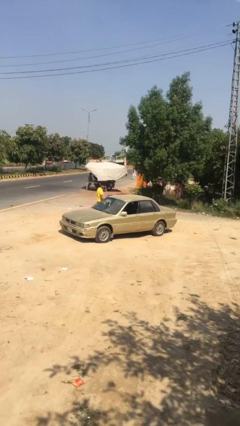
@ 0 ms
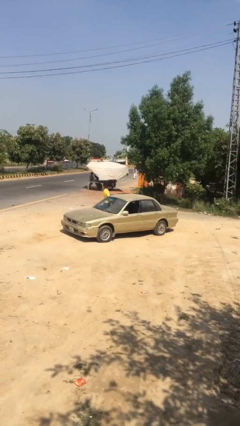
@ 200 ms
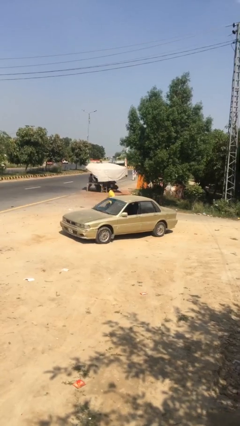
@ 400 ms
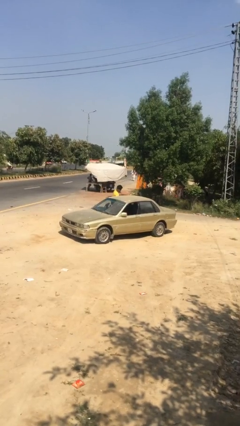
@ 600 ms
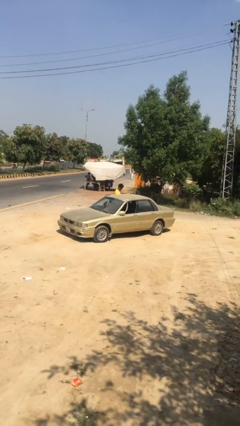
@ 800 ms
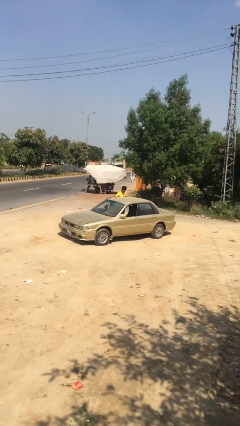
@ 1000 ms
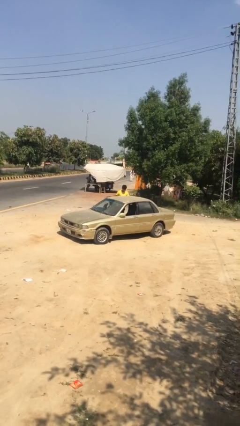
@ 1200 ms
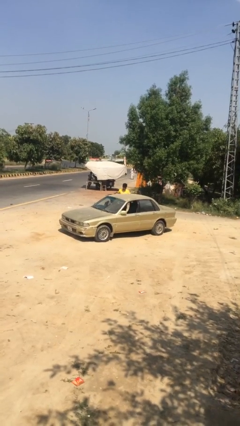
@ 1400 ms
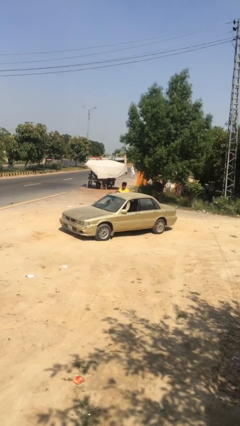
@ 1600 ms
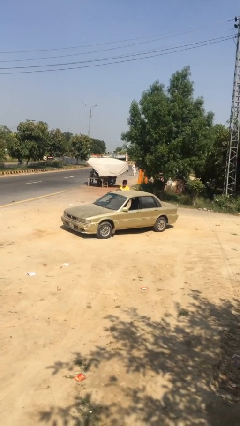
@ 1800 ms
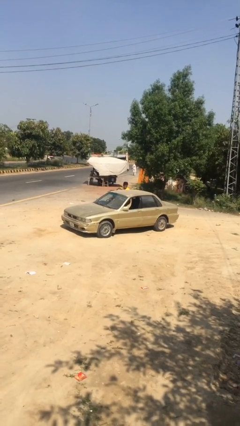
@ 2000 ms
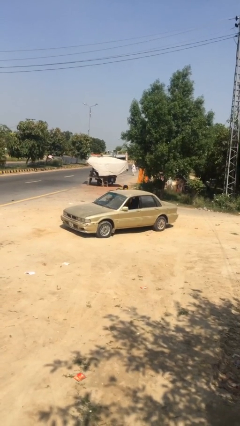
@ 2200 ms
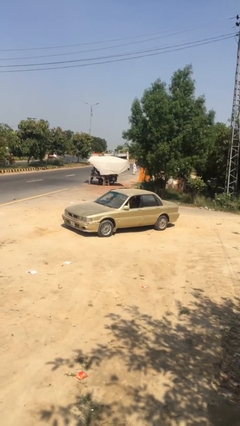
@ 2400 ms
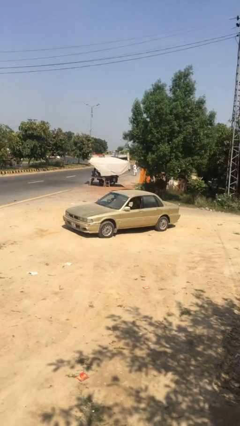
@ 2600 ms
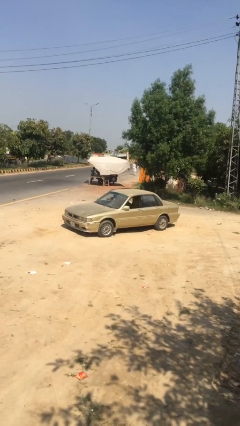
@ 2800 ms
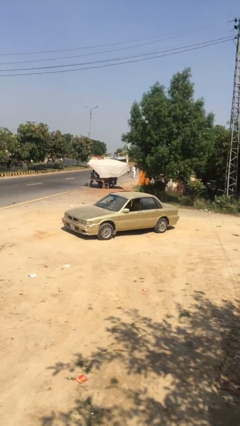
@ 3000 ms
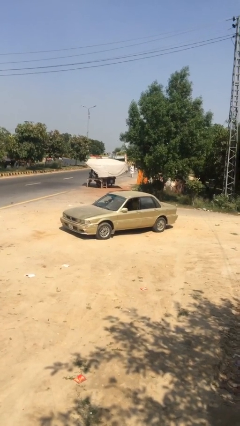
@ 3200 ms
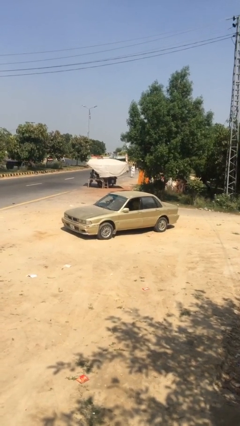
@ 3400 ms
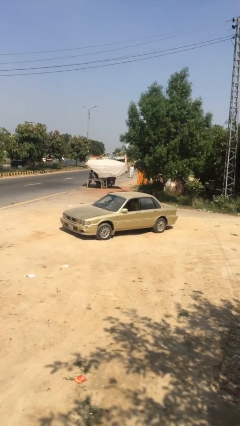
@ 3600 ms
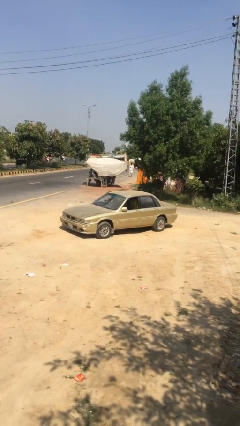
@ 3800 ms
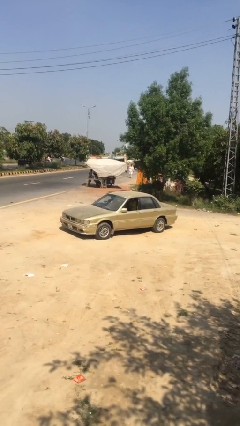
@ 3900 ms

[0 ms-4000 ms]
car picks up person

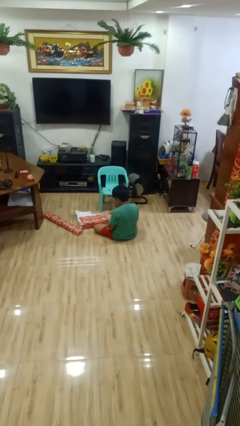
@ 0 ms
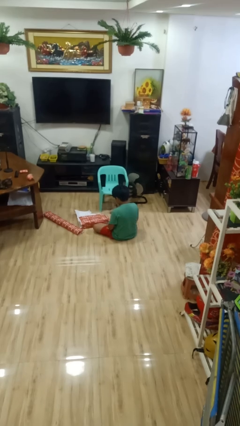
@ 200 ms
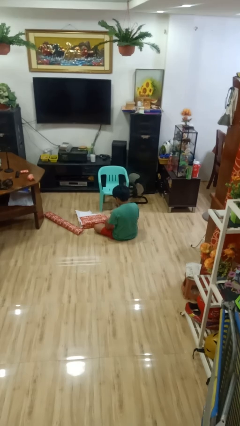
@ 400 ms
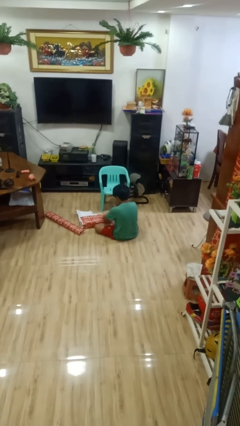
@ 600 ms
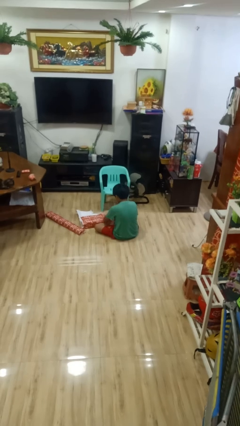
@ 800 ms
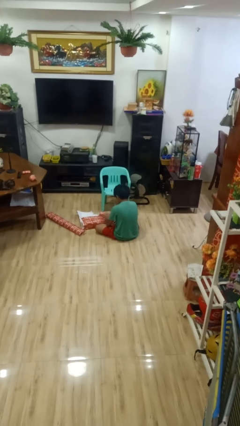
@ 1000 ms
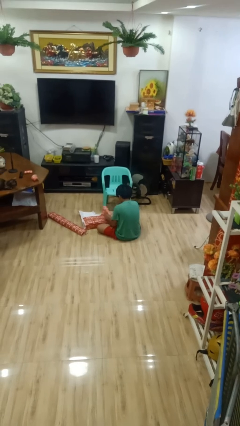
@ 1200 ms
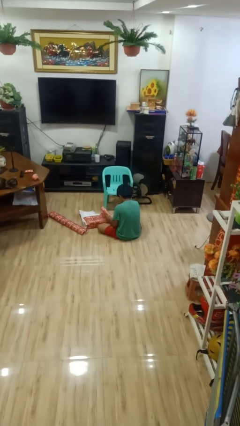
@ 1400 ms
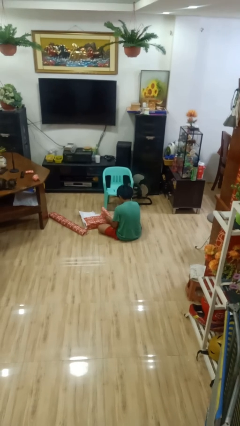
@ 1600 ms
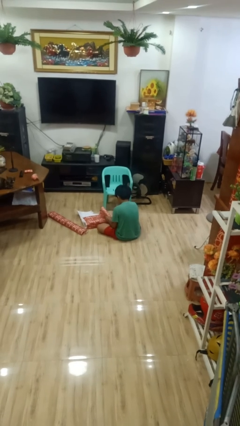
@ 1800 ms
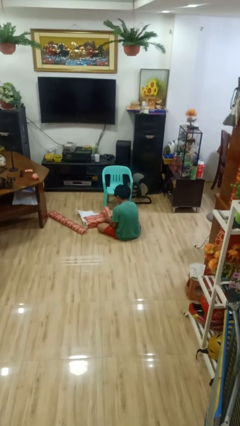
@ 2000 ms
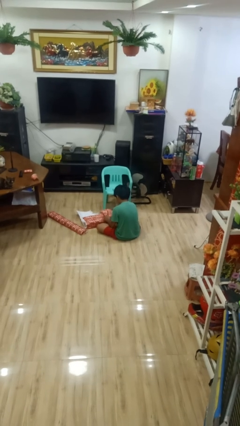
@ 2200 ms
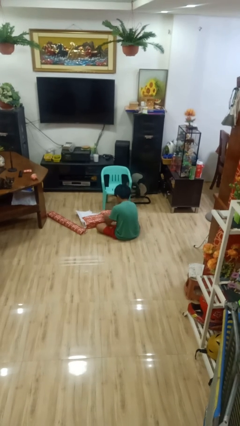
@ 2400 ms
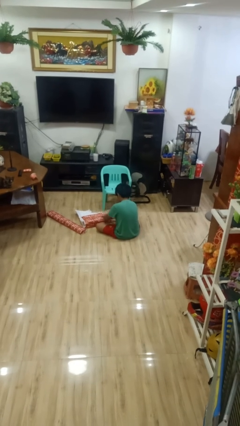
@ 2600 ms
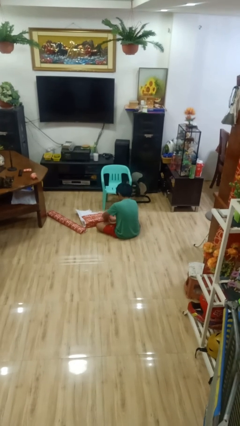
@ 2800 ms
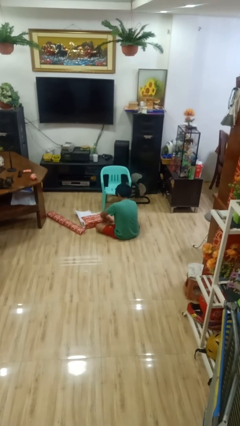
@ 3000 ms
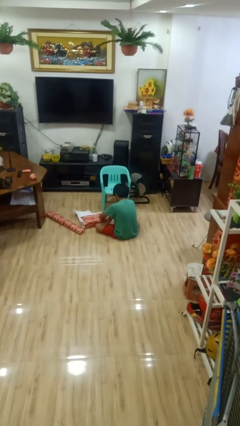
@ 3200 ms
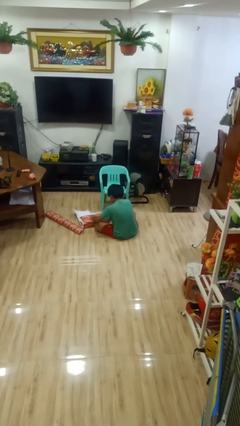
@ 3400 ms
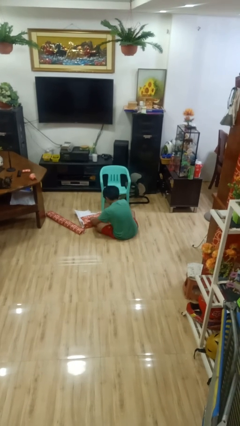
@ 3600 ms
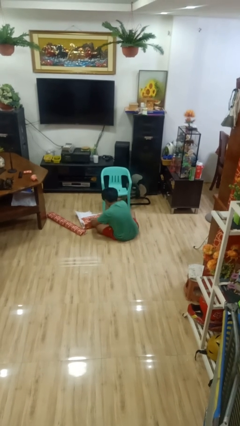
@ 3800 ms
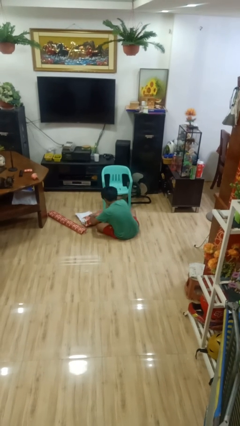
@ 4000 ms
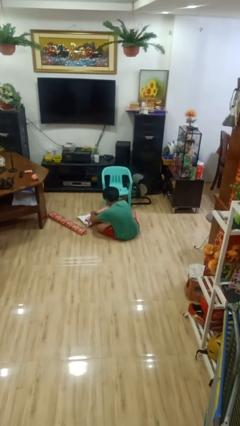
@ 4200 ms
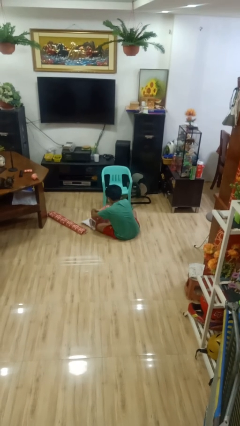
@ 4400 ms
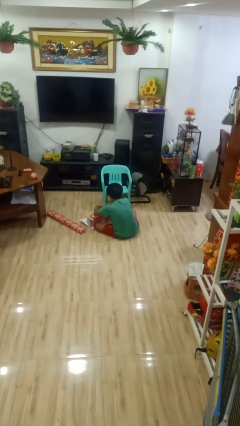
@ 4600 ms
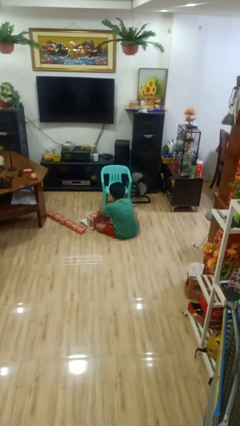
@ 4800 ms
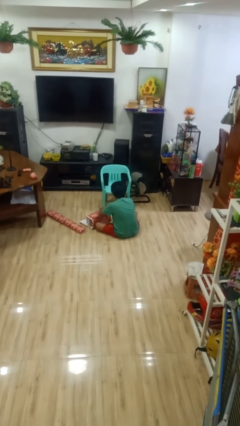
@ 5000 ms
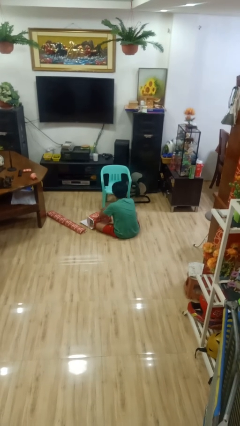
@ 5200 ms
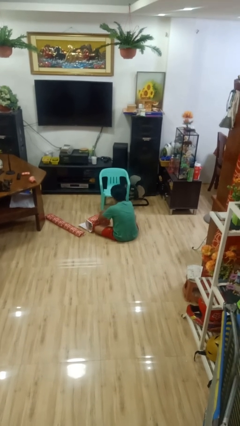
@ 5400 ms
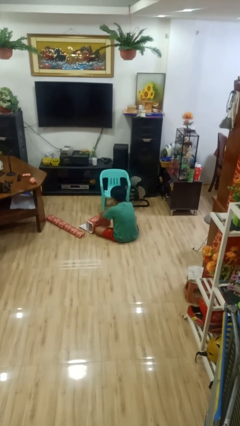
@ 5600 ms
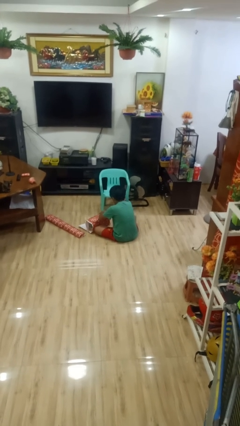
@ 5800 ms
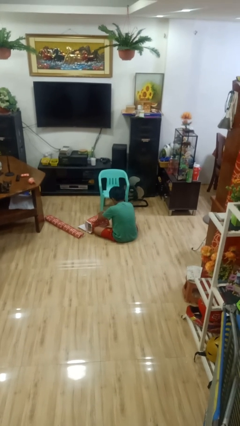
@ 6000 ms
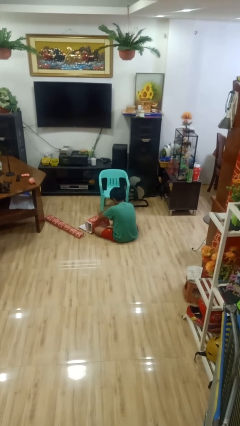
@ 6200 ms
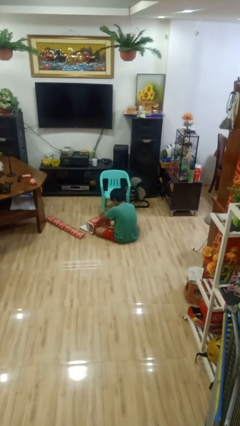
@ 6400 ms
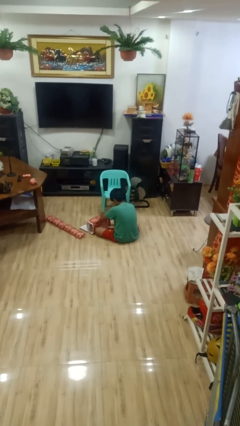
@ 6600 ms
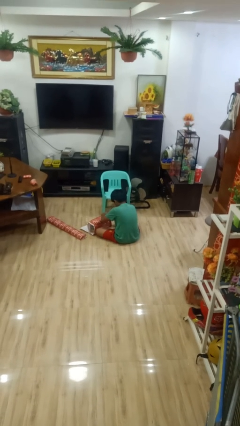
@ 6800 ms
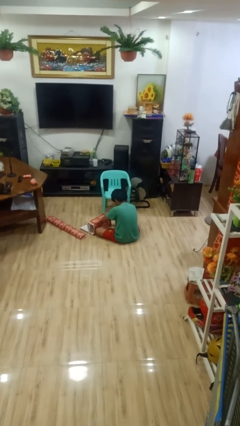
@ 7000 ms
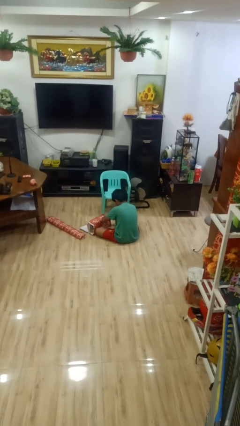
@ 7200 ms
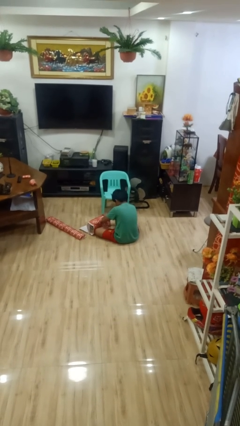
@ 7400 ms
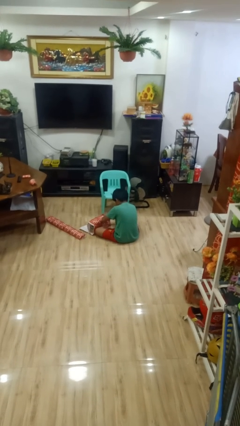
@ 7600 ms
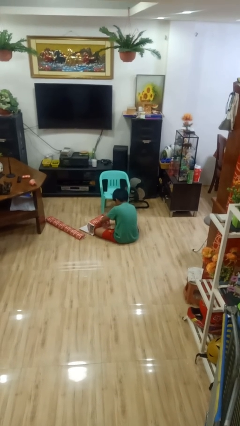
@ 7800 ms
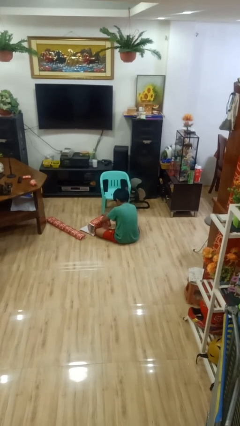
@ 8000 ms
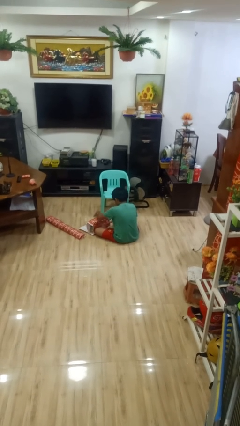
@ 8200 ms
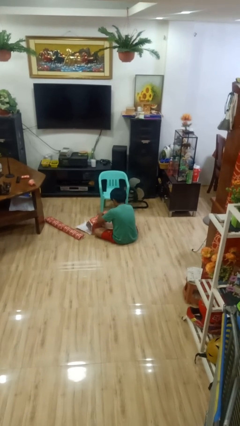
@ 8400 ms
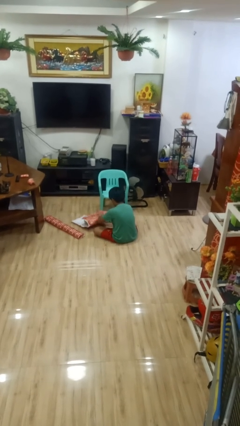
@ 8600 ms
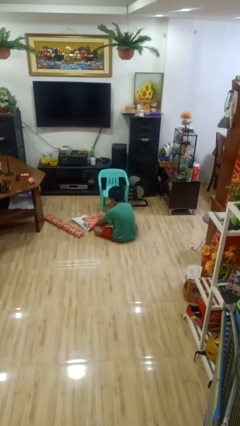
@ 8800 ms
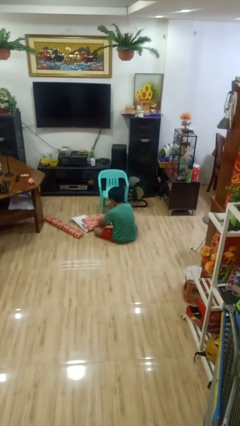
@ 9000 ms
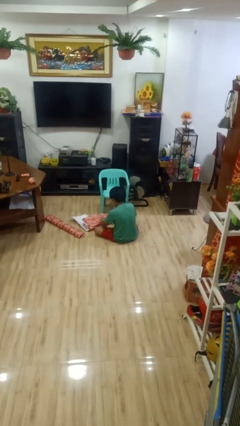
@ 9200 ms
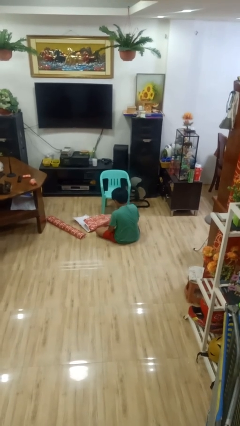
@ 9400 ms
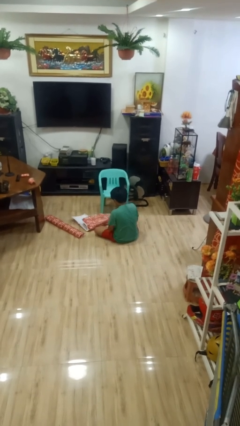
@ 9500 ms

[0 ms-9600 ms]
person wraps box

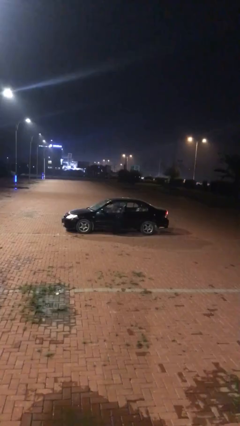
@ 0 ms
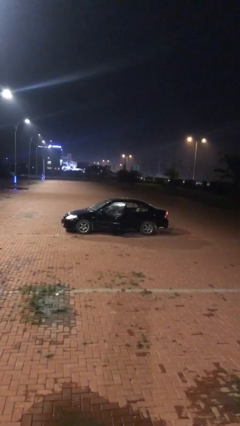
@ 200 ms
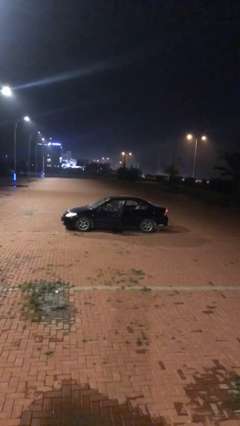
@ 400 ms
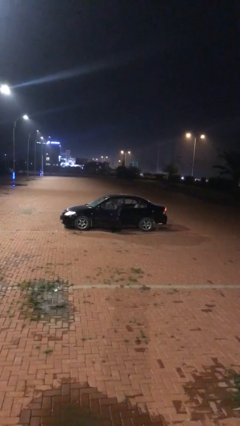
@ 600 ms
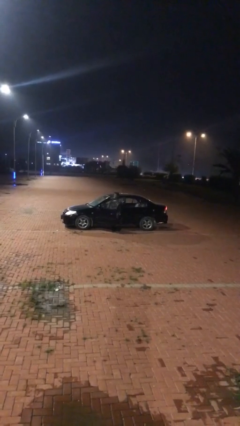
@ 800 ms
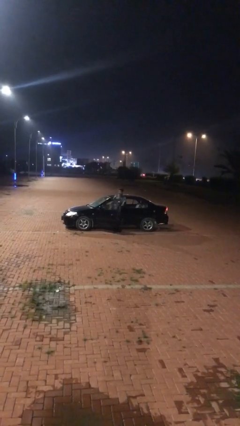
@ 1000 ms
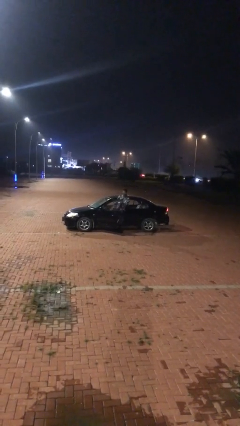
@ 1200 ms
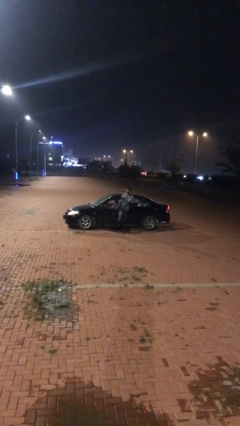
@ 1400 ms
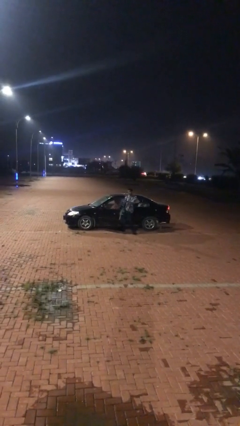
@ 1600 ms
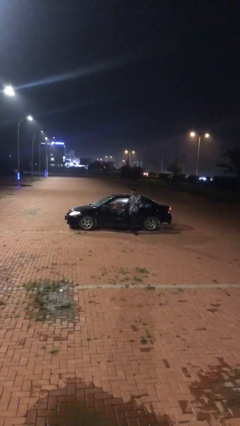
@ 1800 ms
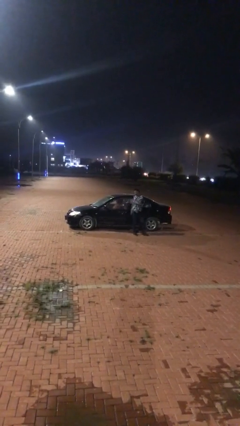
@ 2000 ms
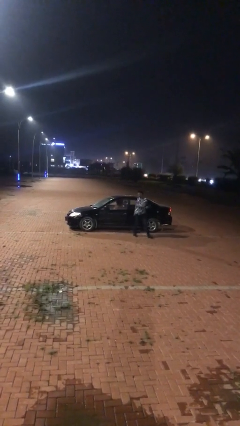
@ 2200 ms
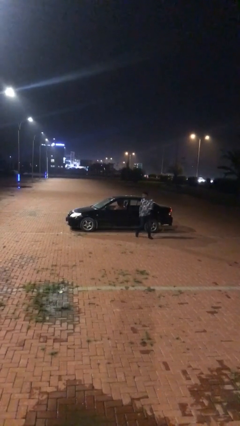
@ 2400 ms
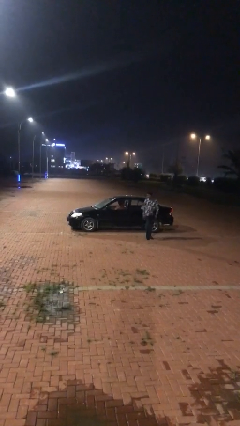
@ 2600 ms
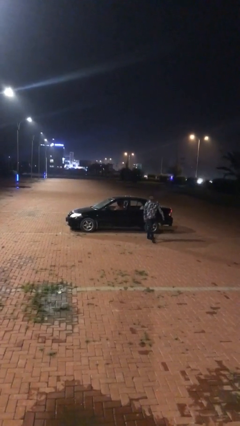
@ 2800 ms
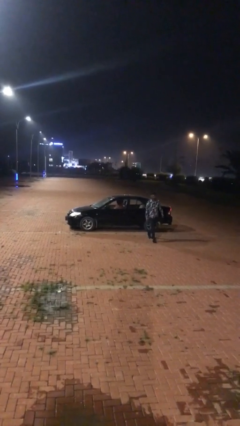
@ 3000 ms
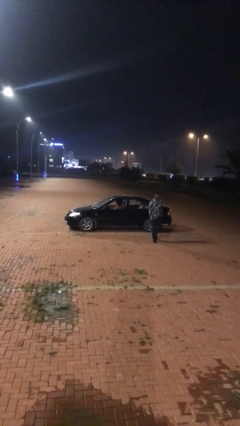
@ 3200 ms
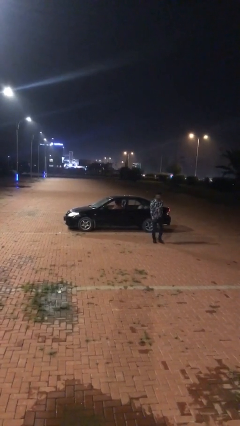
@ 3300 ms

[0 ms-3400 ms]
car drops off person

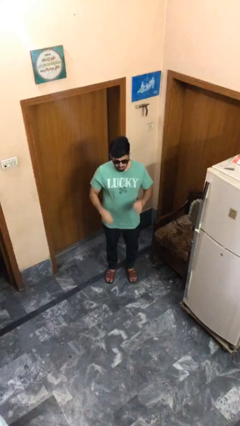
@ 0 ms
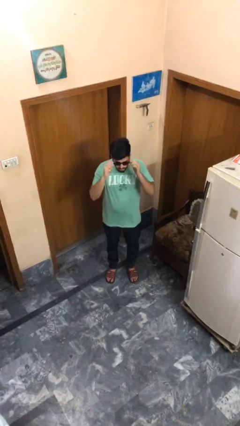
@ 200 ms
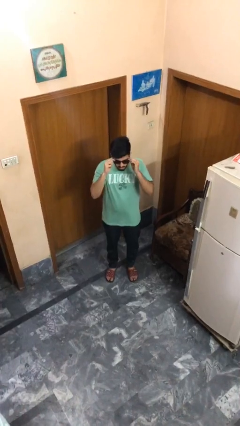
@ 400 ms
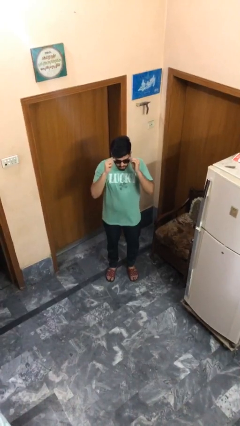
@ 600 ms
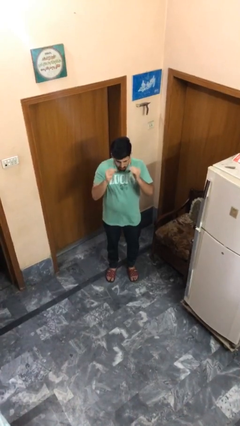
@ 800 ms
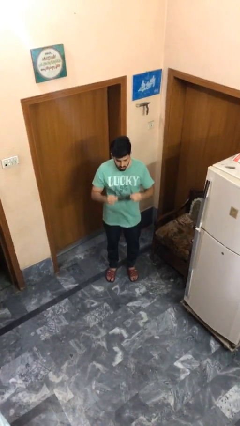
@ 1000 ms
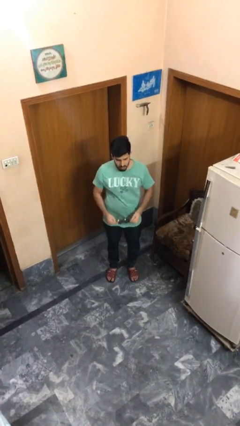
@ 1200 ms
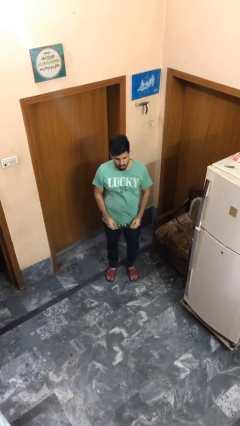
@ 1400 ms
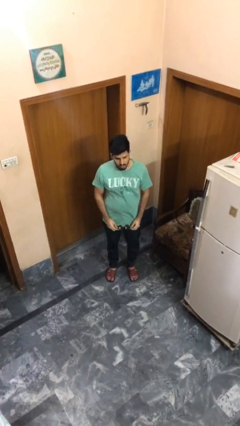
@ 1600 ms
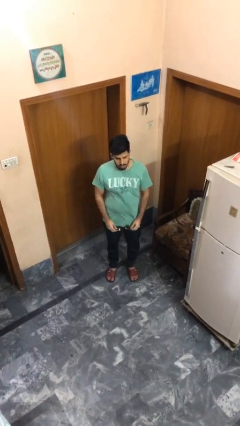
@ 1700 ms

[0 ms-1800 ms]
person takes off sunglasses
